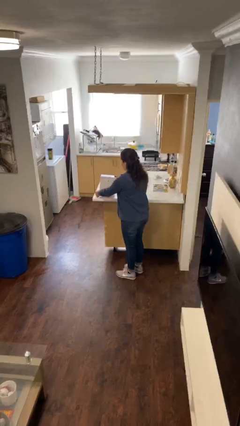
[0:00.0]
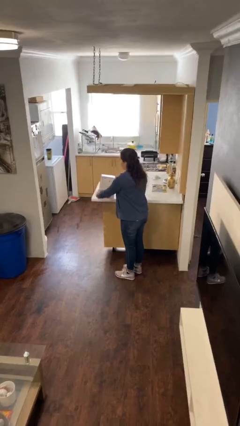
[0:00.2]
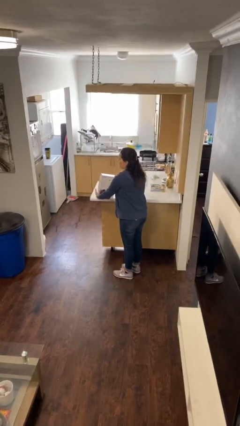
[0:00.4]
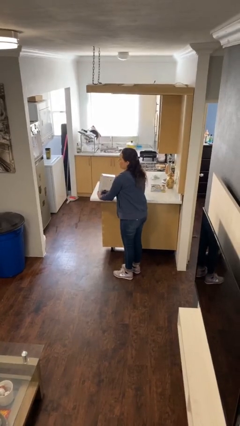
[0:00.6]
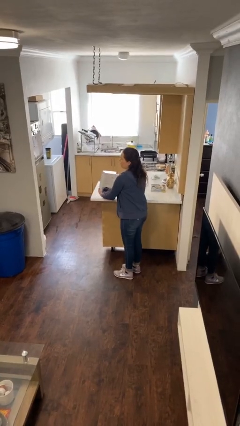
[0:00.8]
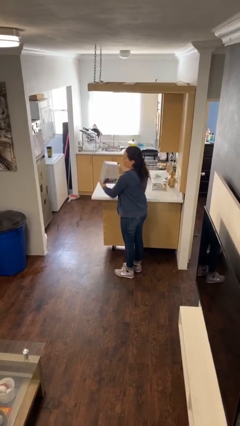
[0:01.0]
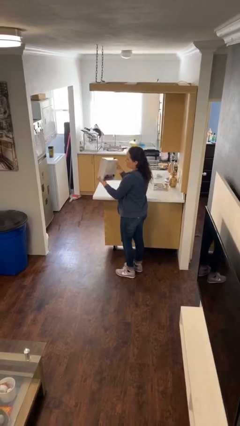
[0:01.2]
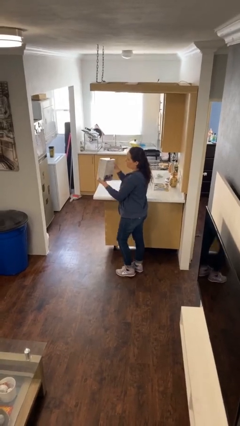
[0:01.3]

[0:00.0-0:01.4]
person picks up object from table

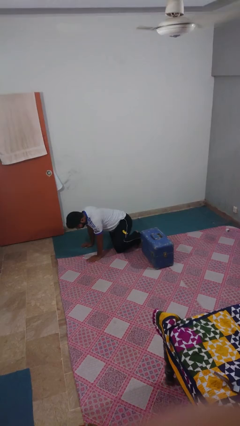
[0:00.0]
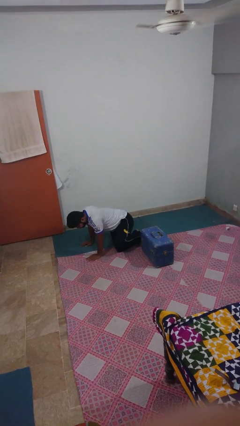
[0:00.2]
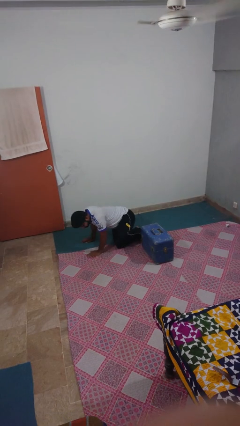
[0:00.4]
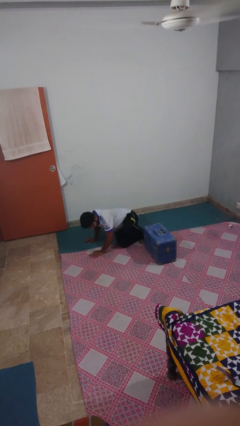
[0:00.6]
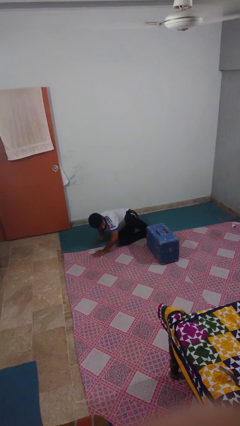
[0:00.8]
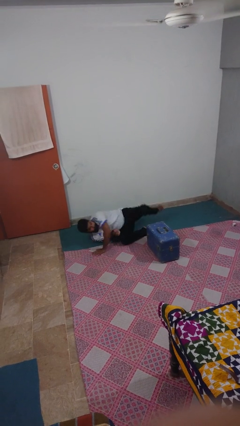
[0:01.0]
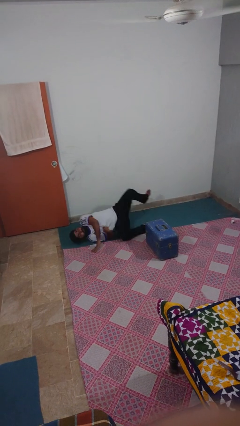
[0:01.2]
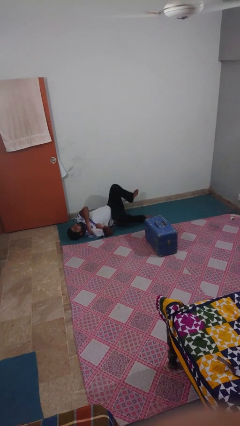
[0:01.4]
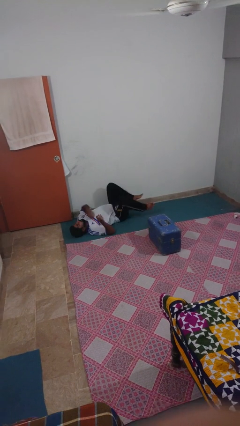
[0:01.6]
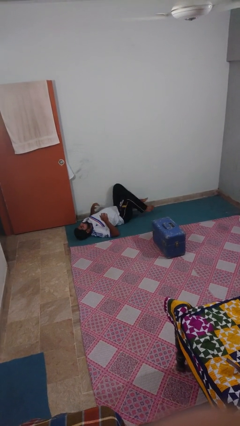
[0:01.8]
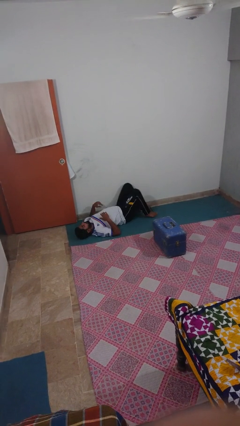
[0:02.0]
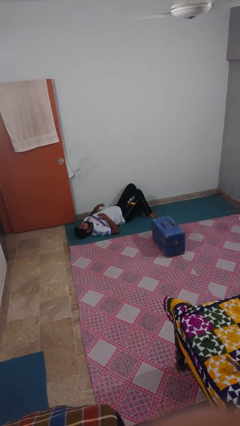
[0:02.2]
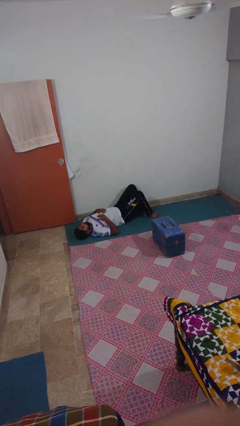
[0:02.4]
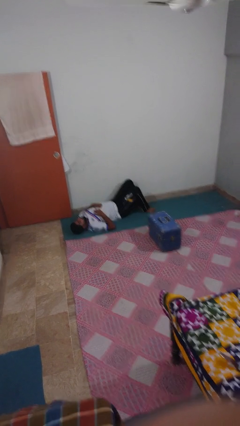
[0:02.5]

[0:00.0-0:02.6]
person lies down on floor

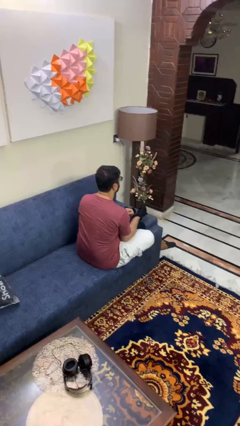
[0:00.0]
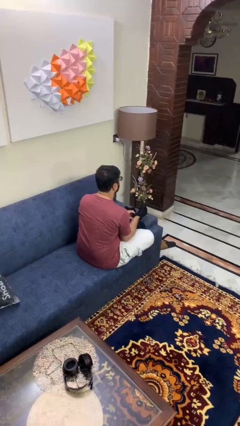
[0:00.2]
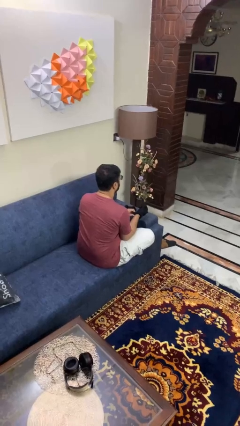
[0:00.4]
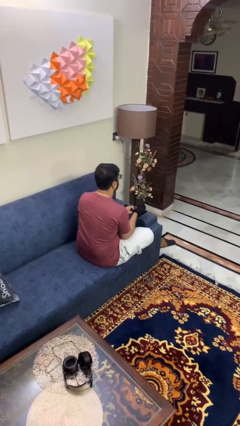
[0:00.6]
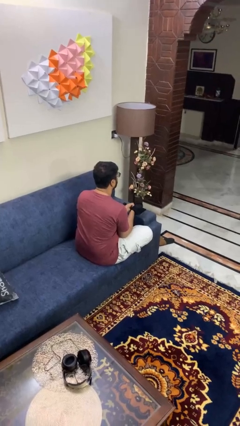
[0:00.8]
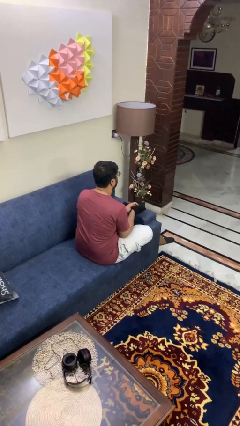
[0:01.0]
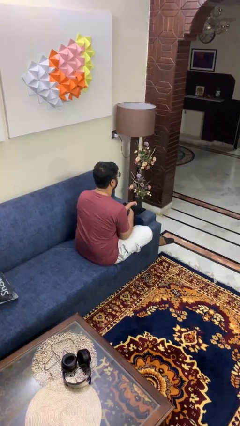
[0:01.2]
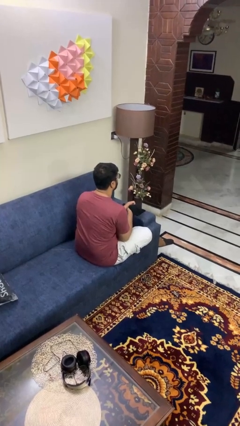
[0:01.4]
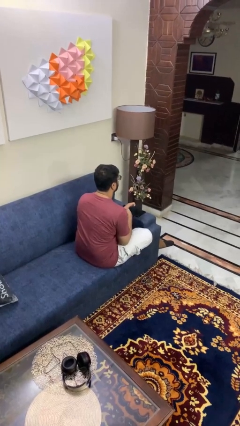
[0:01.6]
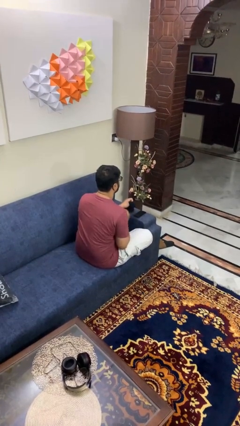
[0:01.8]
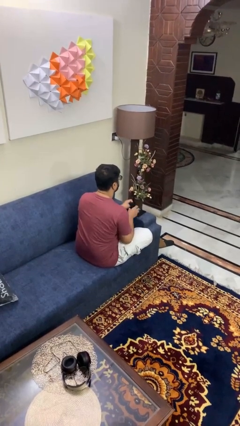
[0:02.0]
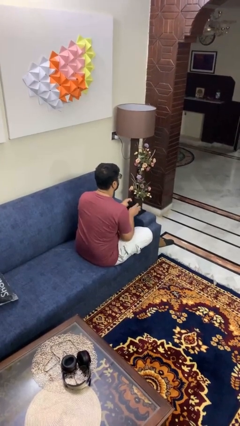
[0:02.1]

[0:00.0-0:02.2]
person takes off gloves

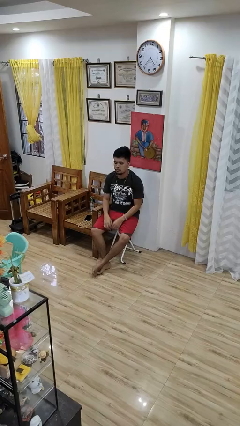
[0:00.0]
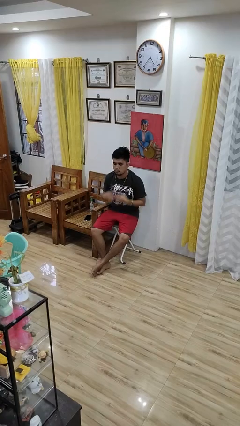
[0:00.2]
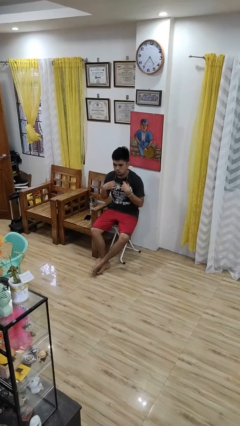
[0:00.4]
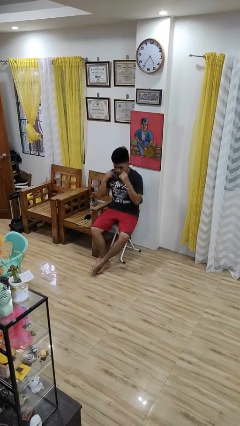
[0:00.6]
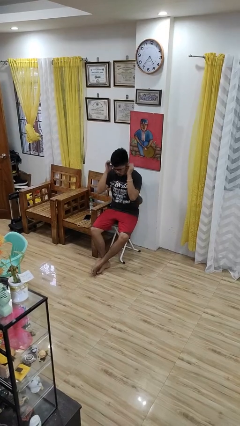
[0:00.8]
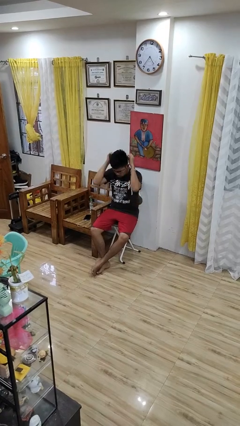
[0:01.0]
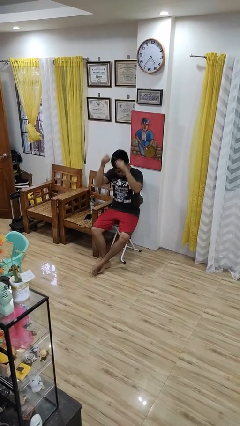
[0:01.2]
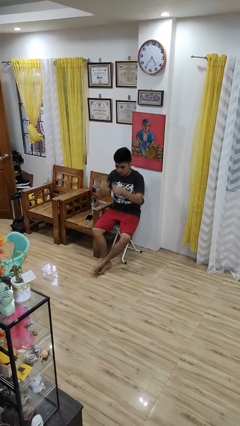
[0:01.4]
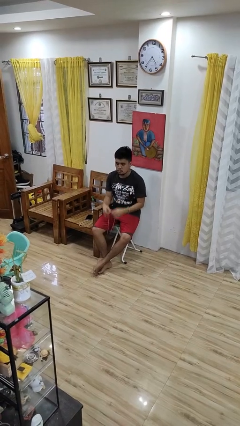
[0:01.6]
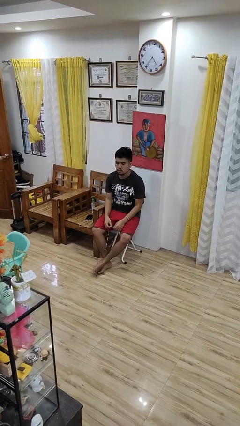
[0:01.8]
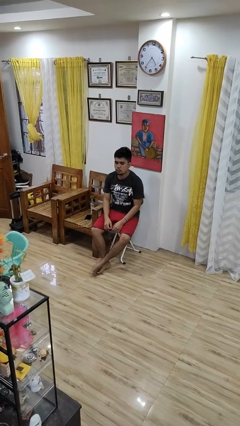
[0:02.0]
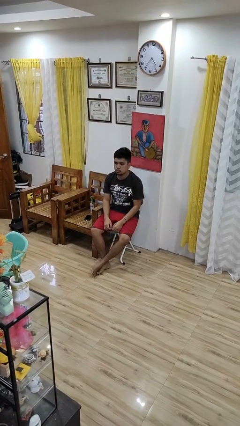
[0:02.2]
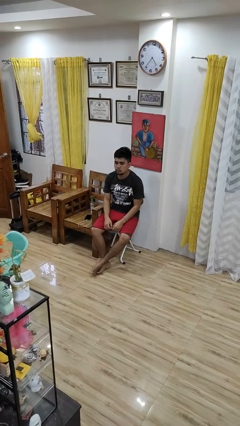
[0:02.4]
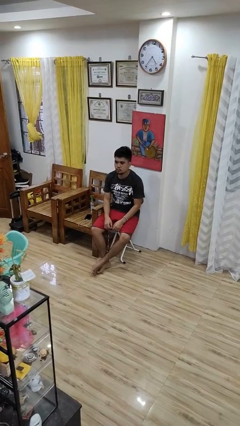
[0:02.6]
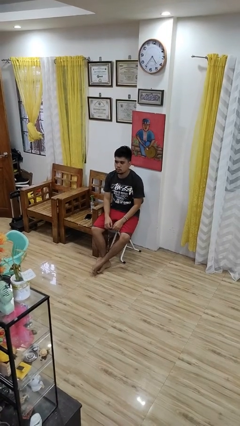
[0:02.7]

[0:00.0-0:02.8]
person takes off necklace

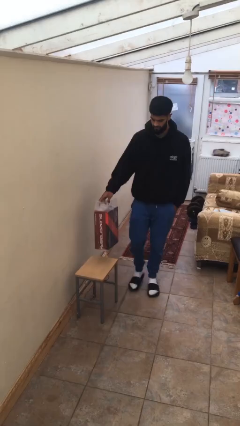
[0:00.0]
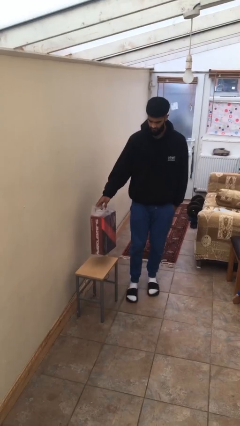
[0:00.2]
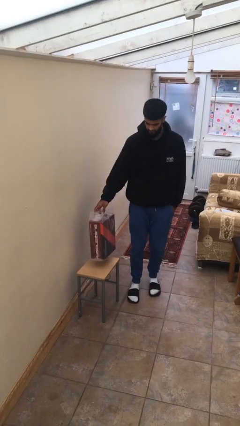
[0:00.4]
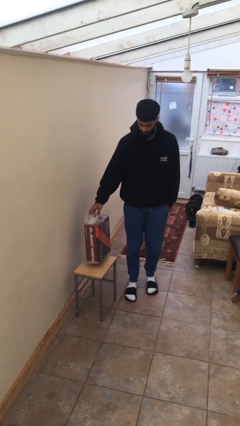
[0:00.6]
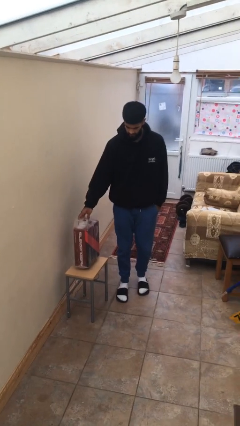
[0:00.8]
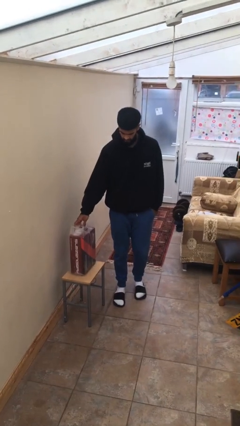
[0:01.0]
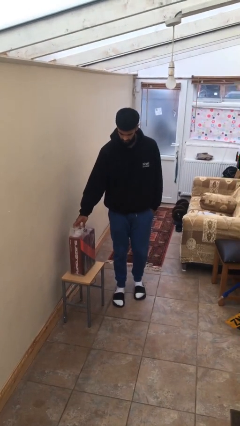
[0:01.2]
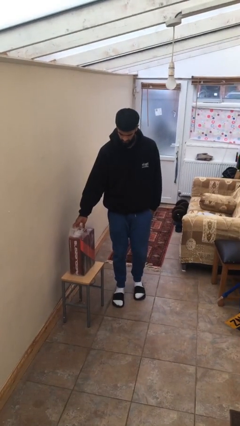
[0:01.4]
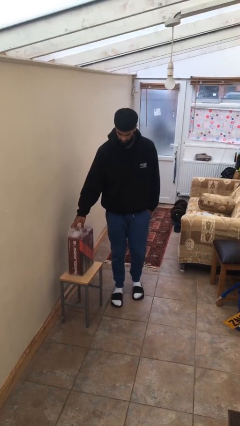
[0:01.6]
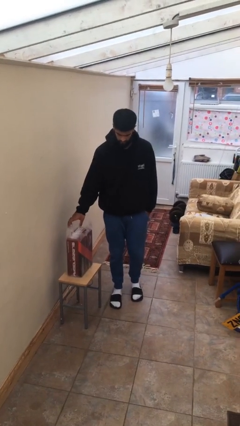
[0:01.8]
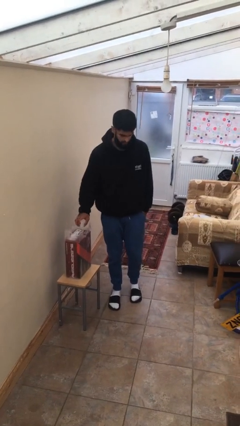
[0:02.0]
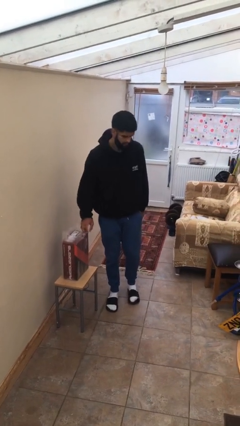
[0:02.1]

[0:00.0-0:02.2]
person puts down object on table

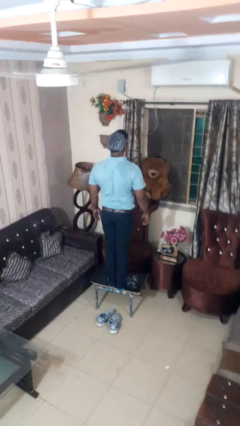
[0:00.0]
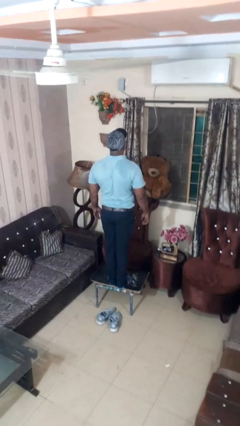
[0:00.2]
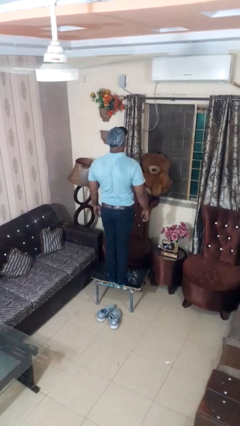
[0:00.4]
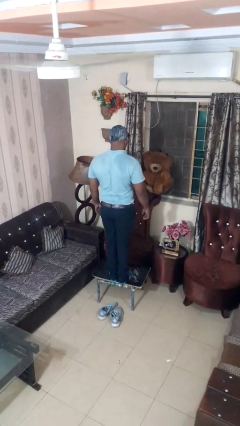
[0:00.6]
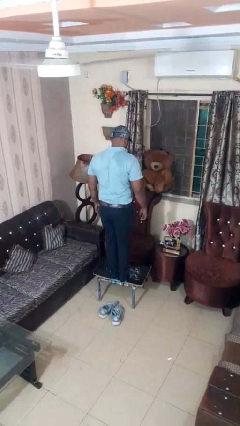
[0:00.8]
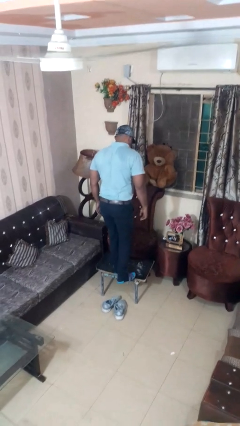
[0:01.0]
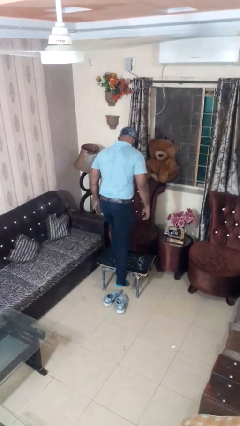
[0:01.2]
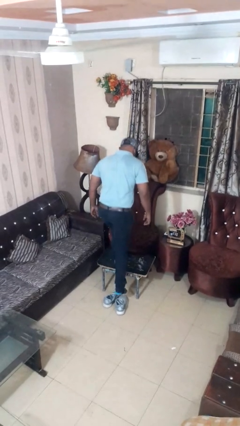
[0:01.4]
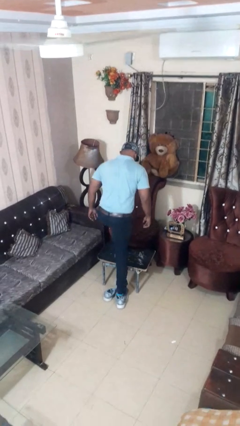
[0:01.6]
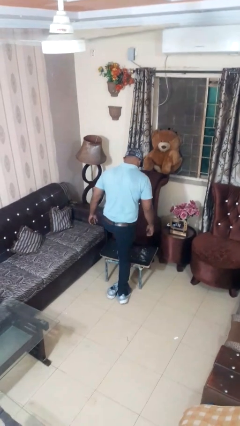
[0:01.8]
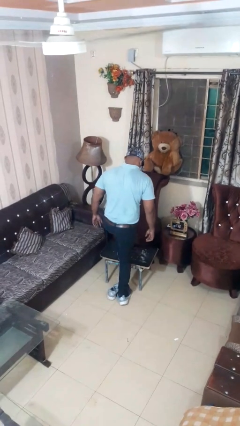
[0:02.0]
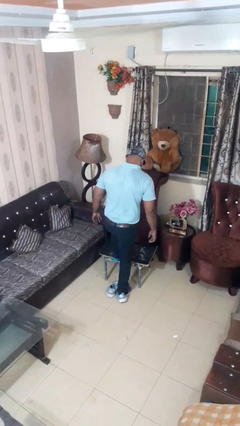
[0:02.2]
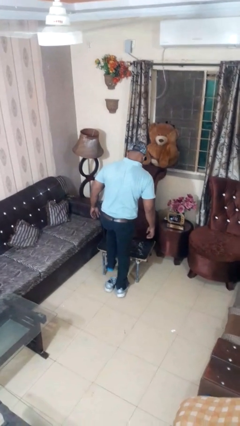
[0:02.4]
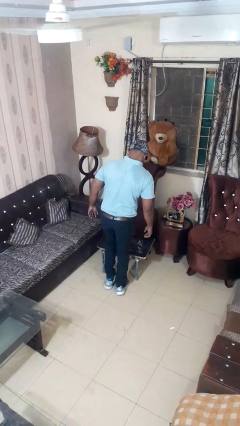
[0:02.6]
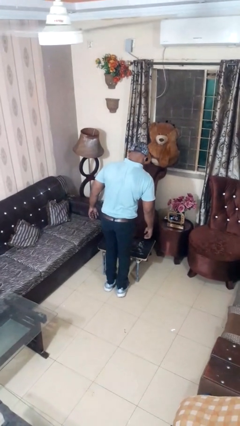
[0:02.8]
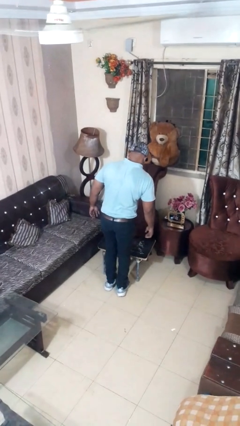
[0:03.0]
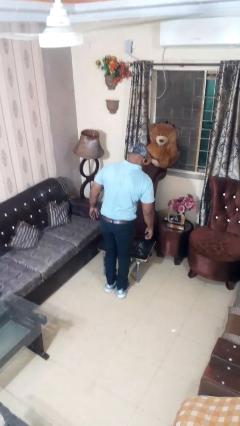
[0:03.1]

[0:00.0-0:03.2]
person climbs off table

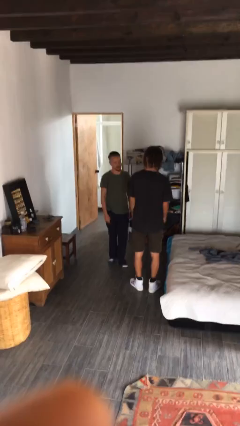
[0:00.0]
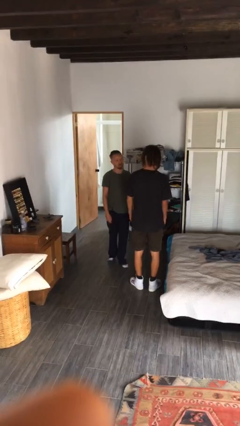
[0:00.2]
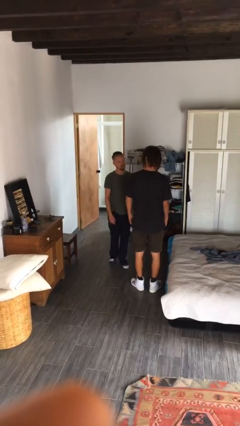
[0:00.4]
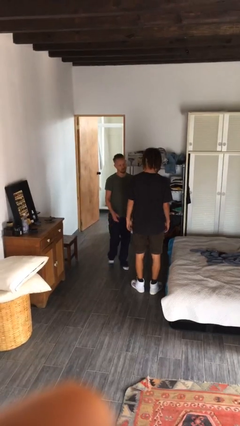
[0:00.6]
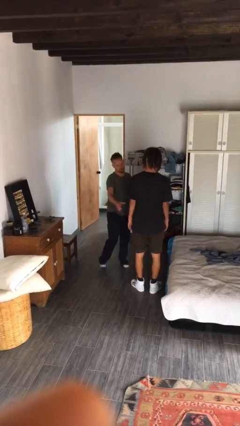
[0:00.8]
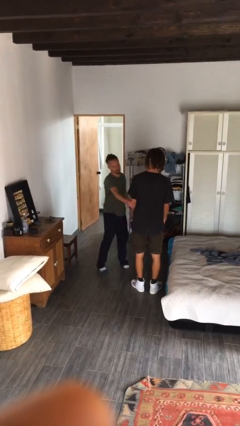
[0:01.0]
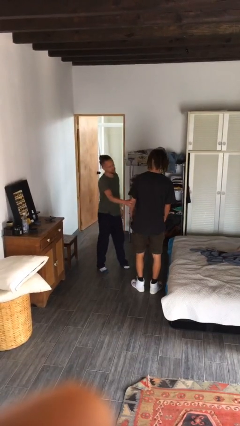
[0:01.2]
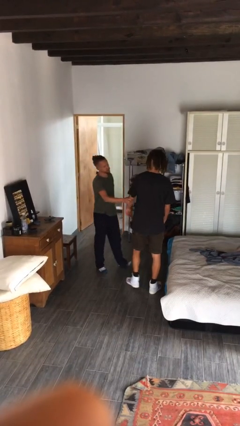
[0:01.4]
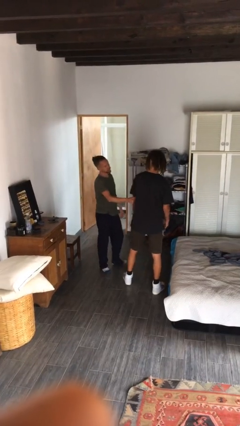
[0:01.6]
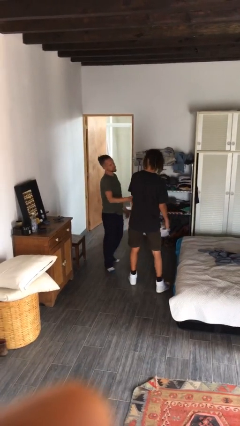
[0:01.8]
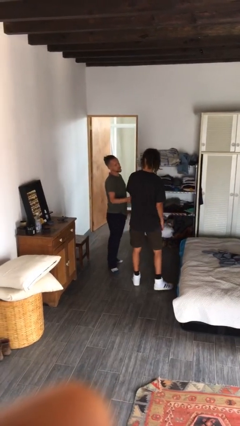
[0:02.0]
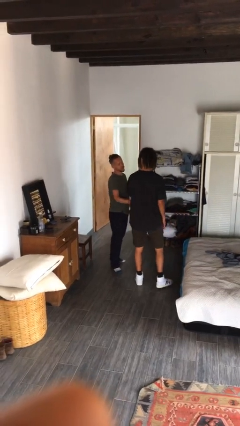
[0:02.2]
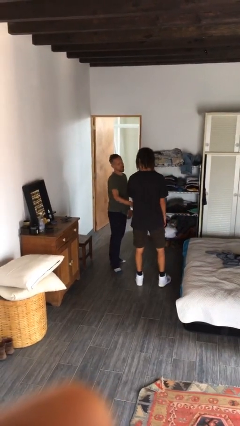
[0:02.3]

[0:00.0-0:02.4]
person grabs person by forearm

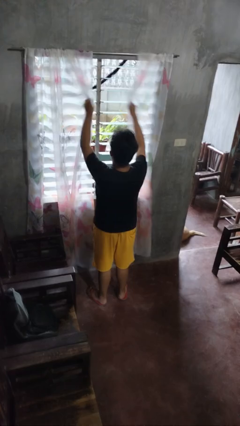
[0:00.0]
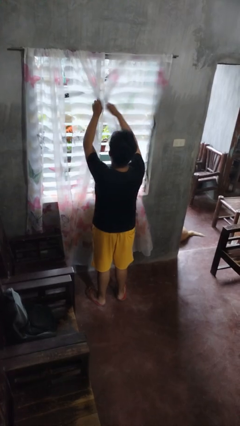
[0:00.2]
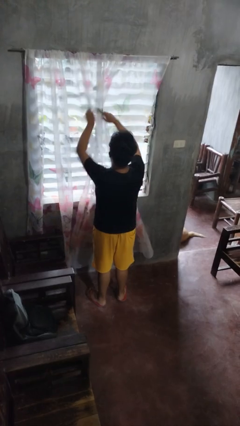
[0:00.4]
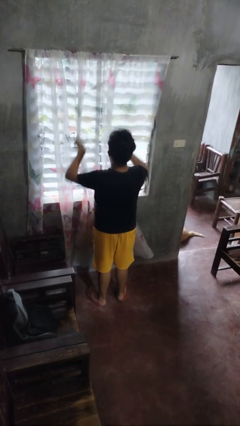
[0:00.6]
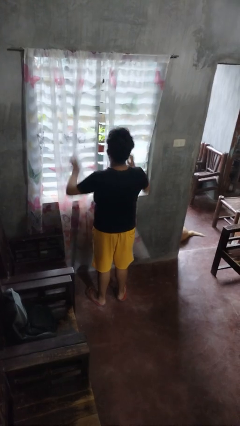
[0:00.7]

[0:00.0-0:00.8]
person closes curtains
